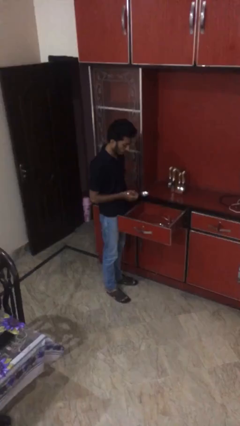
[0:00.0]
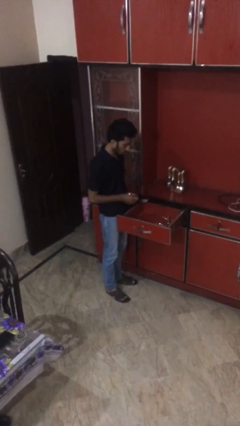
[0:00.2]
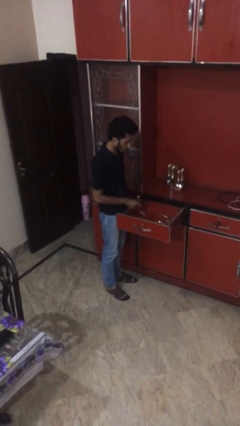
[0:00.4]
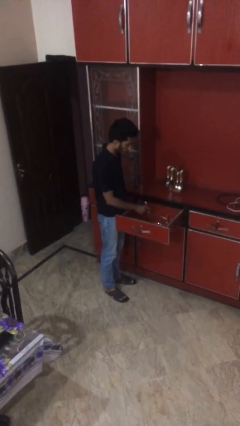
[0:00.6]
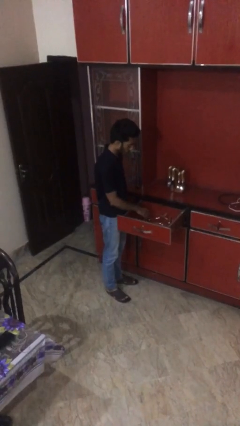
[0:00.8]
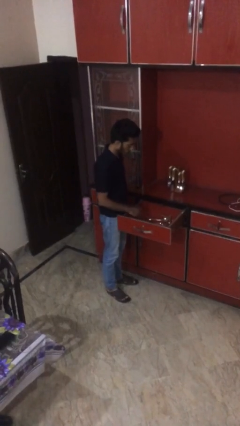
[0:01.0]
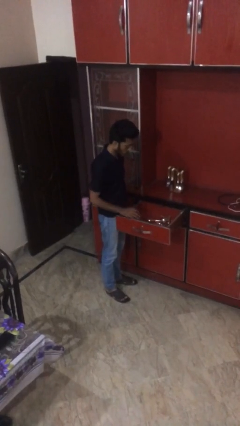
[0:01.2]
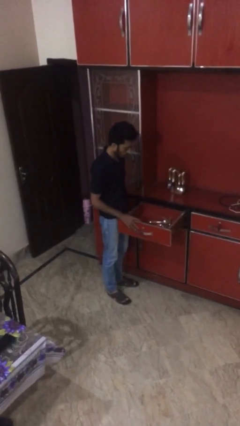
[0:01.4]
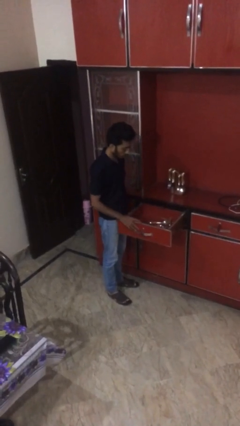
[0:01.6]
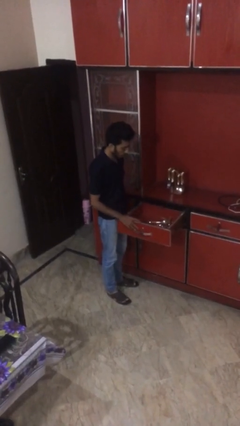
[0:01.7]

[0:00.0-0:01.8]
person puts object into kitchen drawer

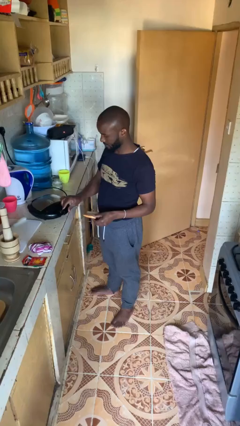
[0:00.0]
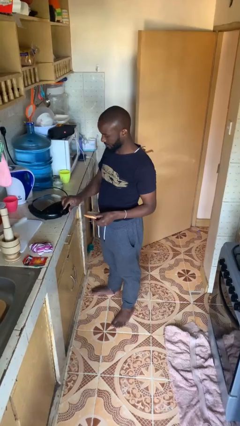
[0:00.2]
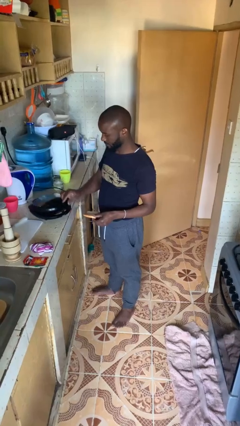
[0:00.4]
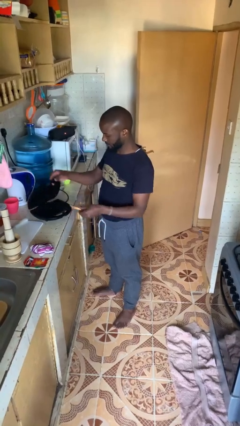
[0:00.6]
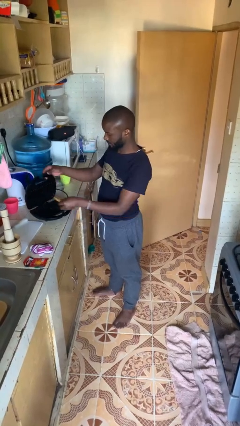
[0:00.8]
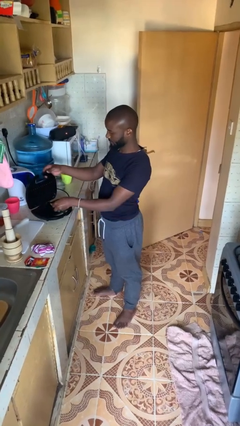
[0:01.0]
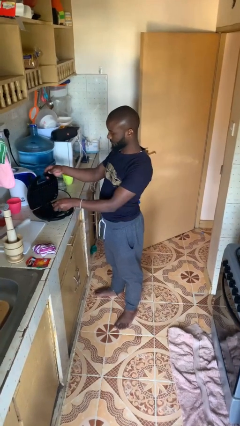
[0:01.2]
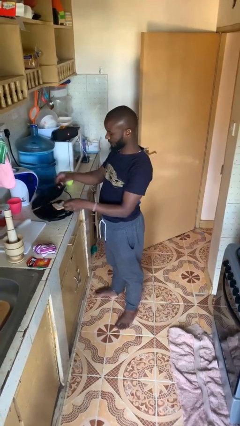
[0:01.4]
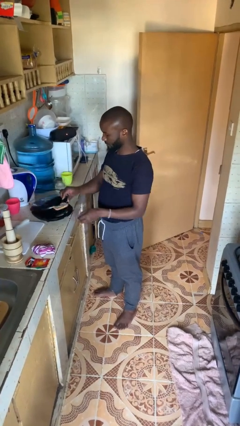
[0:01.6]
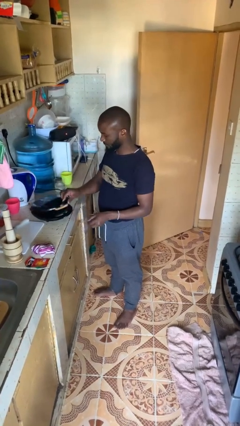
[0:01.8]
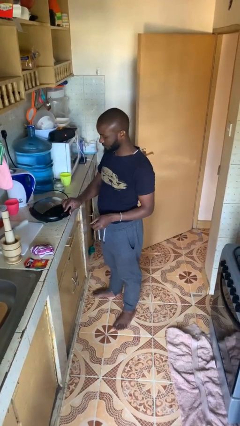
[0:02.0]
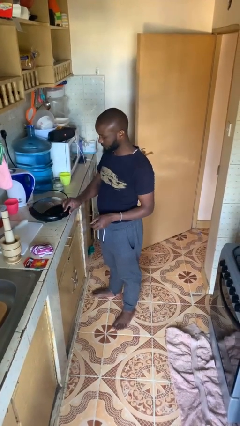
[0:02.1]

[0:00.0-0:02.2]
person puts object into toaster

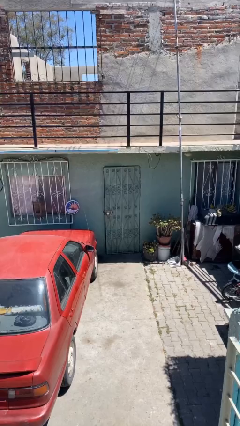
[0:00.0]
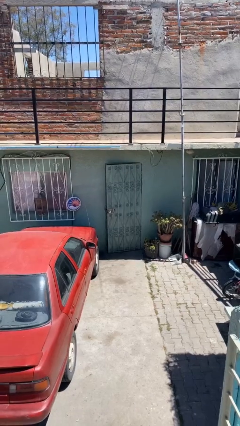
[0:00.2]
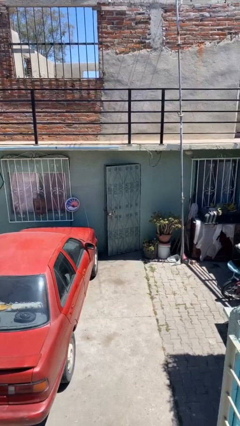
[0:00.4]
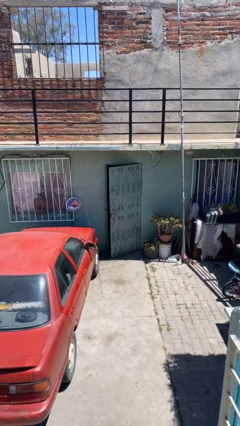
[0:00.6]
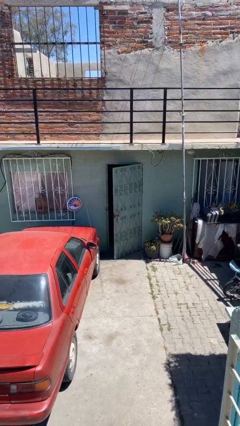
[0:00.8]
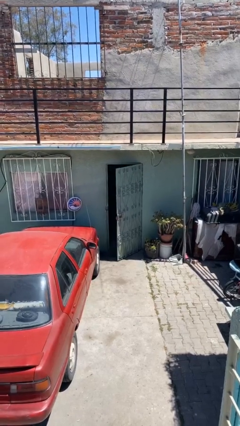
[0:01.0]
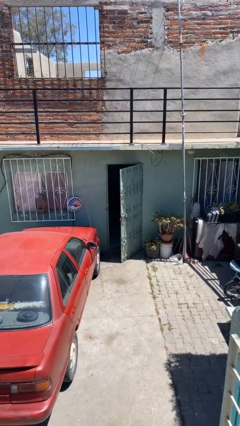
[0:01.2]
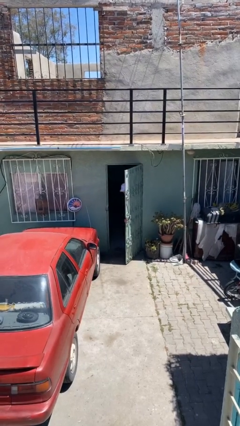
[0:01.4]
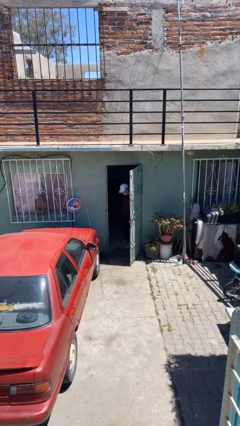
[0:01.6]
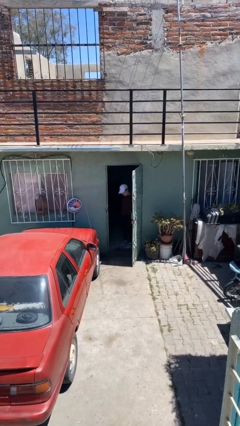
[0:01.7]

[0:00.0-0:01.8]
person opens facility door

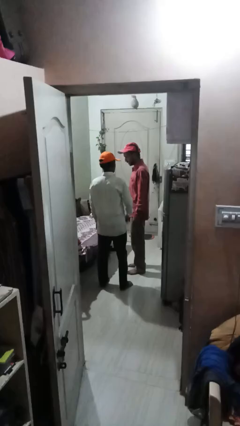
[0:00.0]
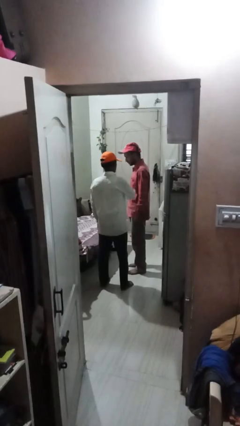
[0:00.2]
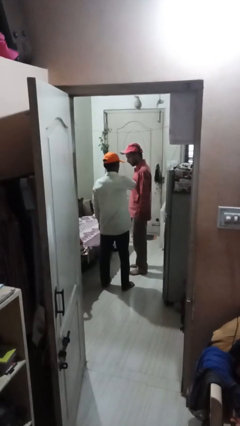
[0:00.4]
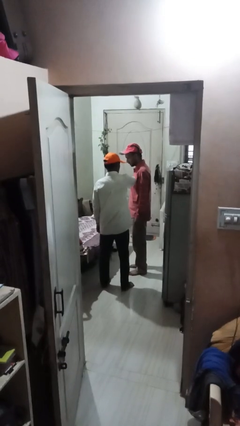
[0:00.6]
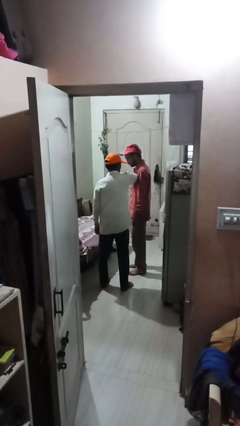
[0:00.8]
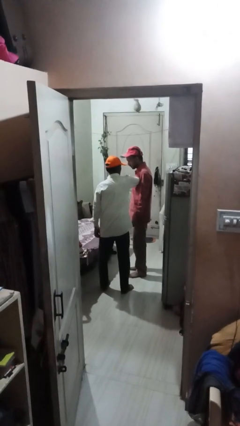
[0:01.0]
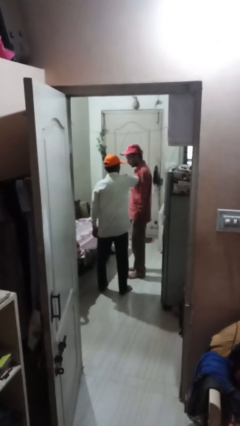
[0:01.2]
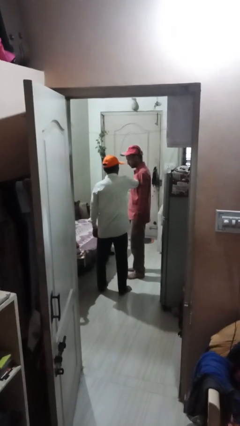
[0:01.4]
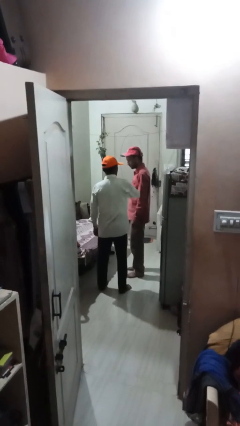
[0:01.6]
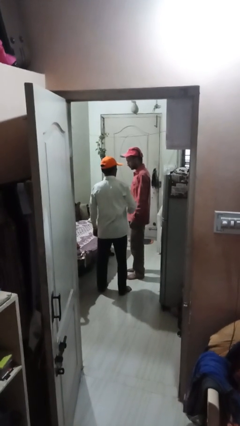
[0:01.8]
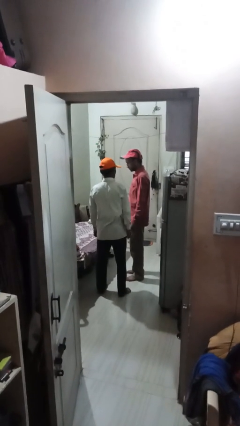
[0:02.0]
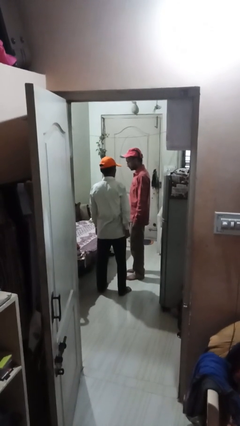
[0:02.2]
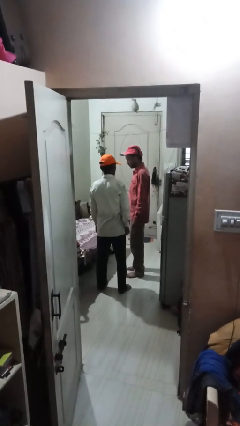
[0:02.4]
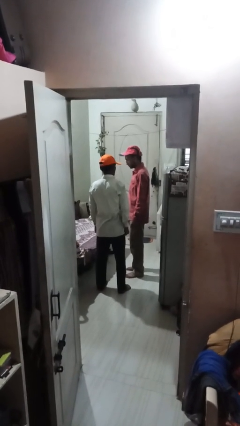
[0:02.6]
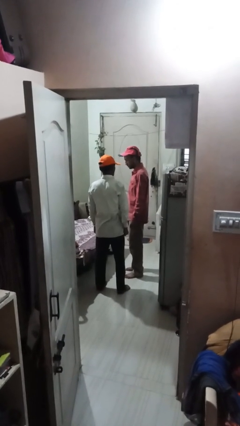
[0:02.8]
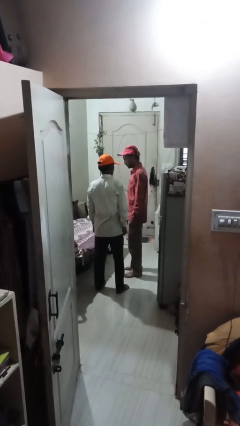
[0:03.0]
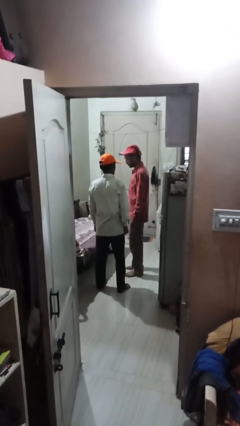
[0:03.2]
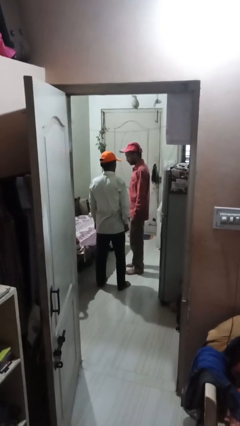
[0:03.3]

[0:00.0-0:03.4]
person nudges person with elbow

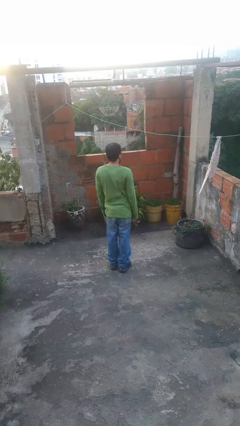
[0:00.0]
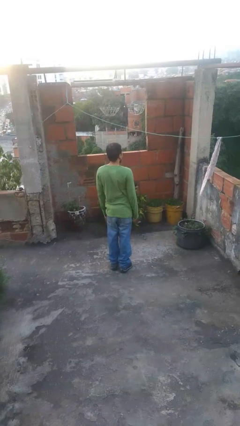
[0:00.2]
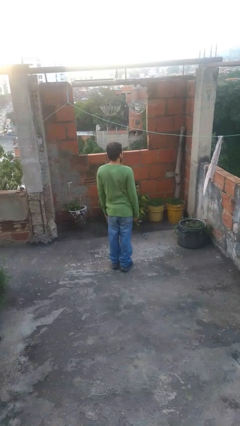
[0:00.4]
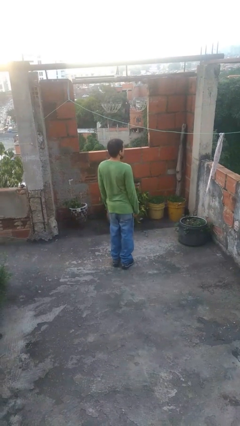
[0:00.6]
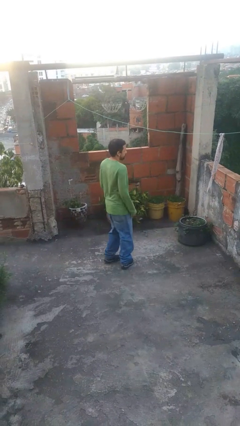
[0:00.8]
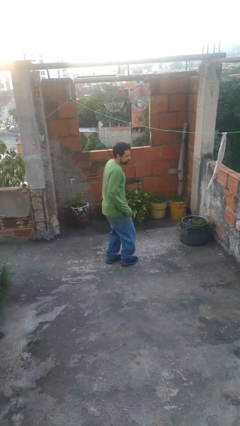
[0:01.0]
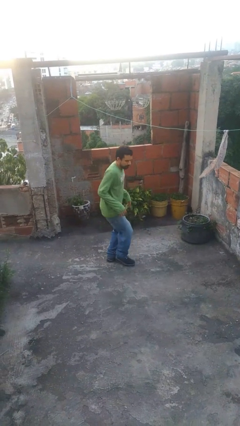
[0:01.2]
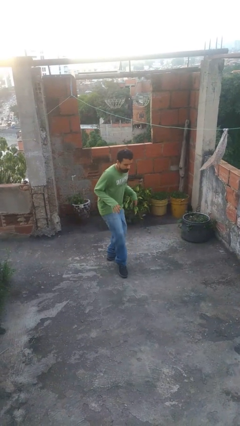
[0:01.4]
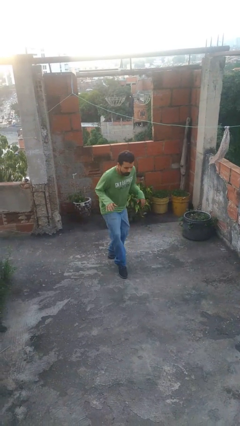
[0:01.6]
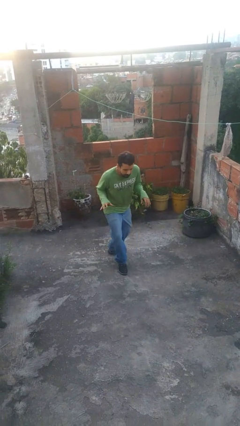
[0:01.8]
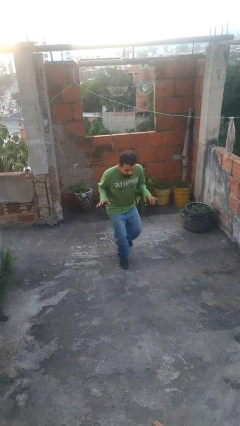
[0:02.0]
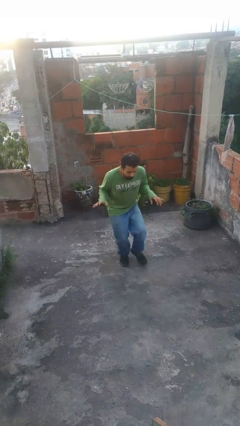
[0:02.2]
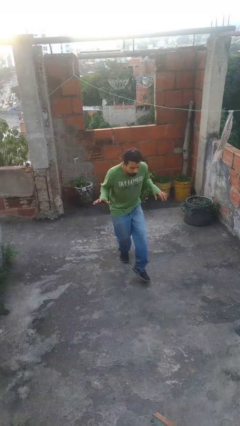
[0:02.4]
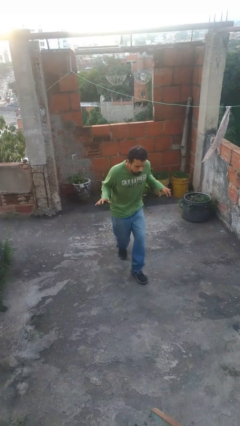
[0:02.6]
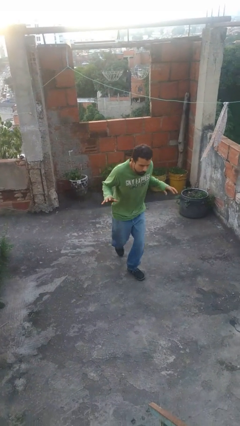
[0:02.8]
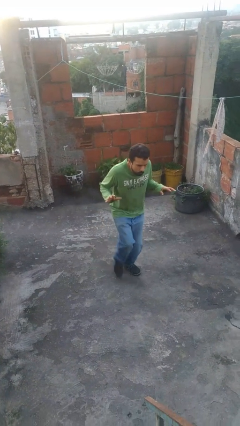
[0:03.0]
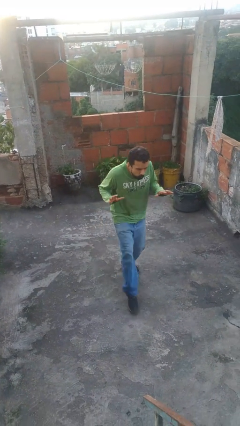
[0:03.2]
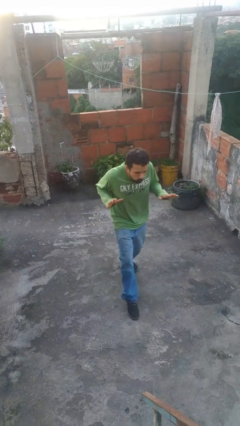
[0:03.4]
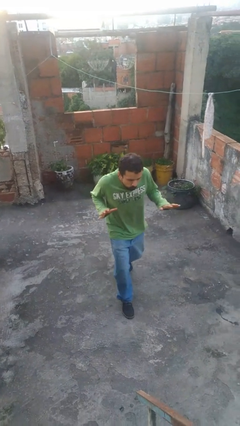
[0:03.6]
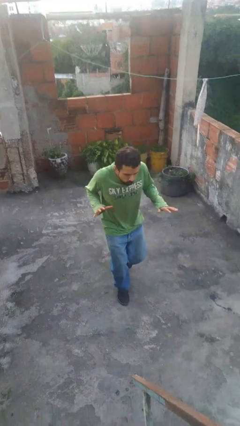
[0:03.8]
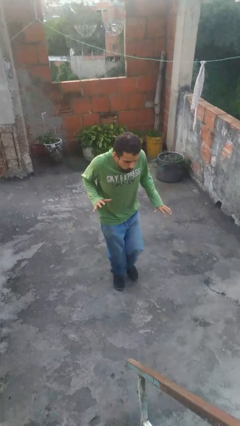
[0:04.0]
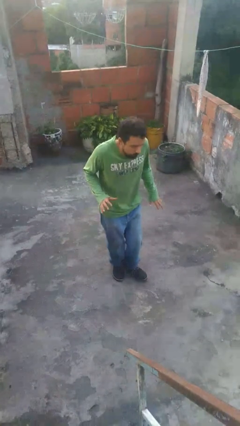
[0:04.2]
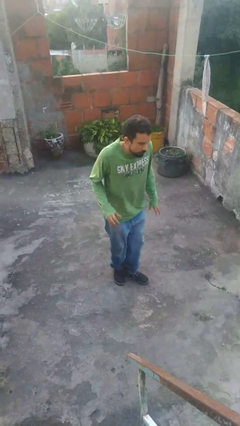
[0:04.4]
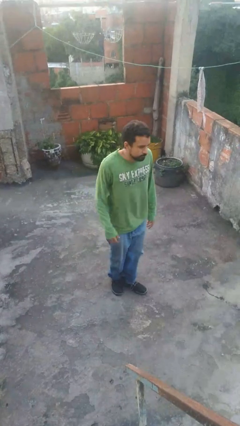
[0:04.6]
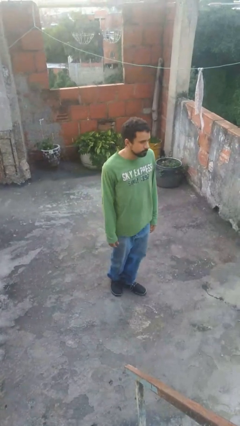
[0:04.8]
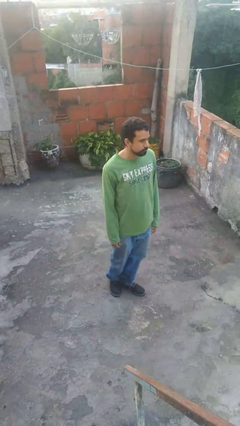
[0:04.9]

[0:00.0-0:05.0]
person walks tiptoe

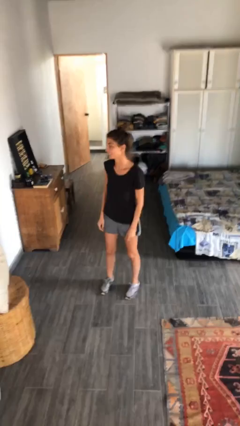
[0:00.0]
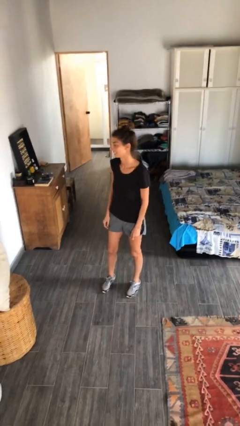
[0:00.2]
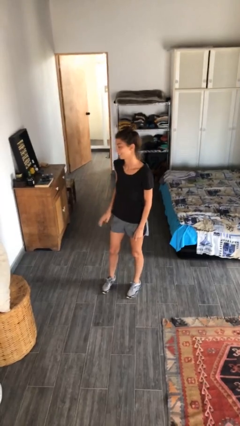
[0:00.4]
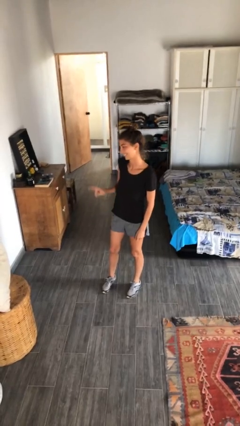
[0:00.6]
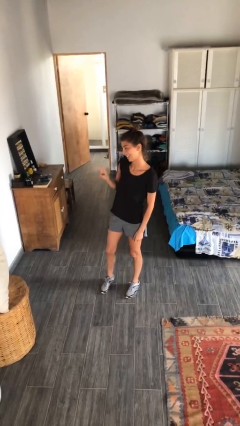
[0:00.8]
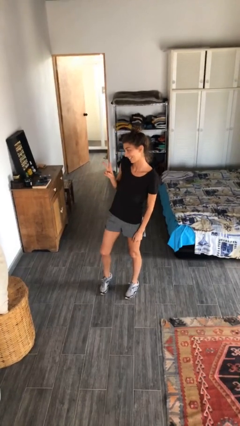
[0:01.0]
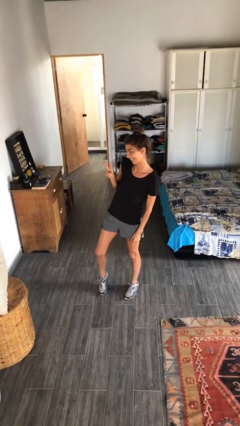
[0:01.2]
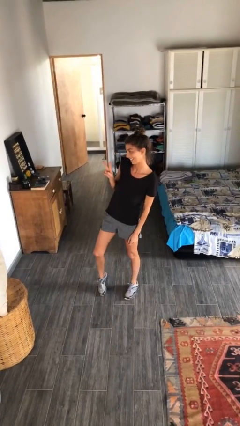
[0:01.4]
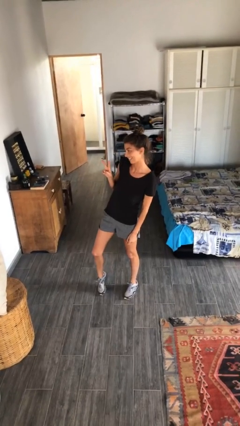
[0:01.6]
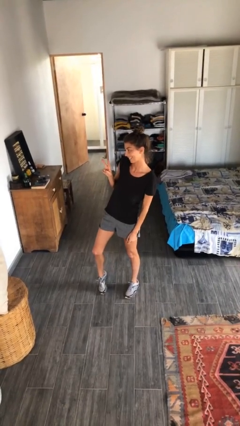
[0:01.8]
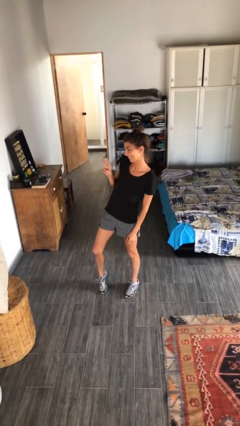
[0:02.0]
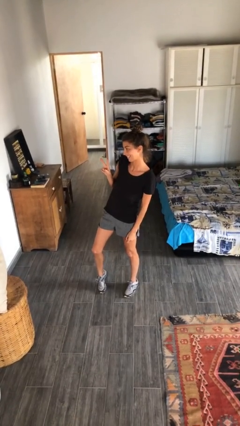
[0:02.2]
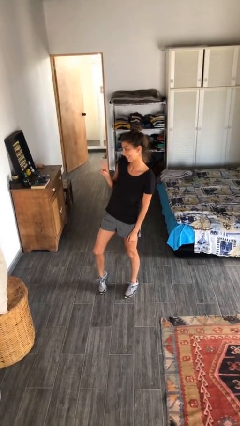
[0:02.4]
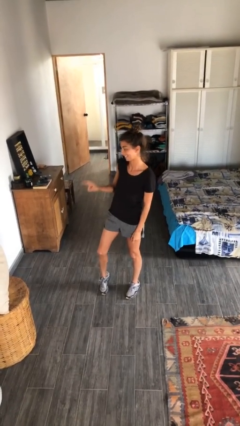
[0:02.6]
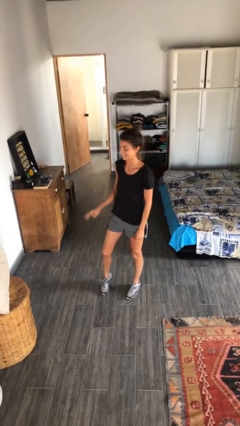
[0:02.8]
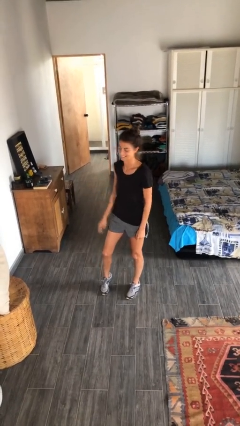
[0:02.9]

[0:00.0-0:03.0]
person gestures peace
